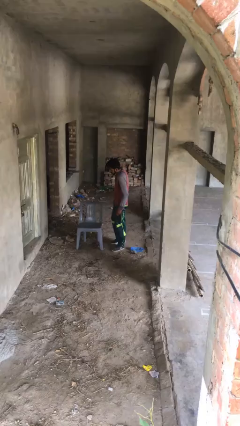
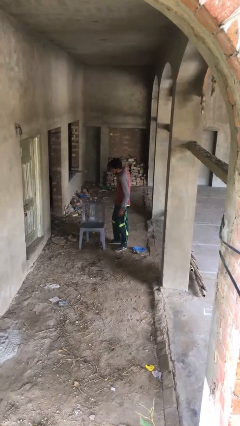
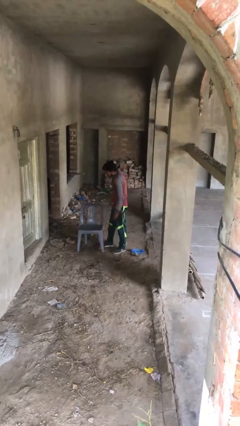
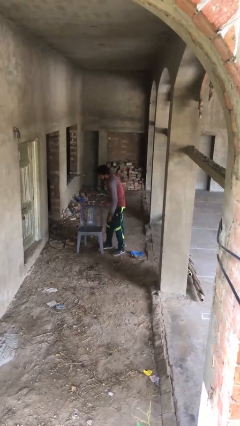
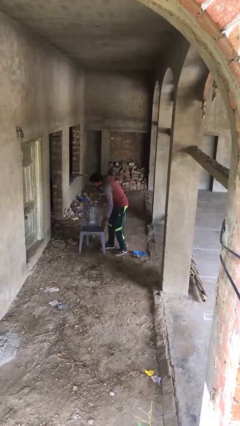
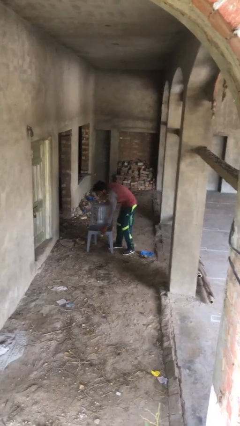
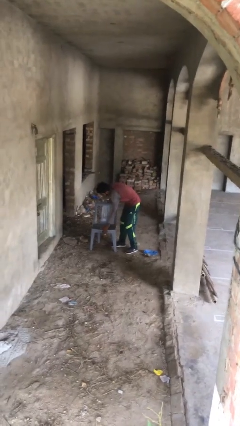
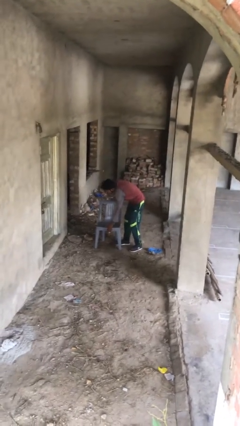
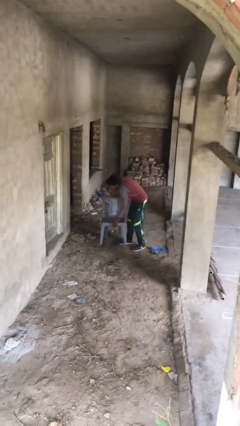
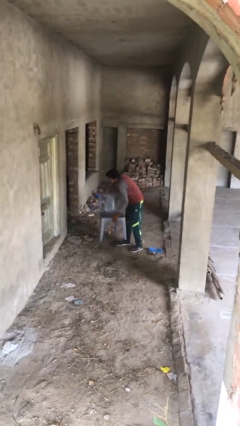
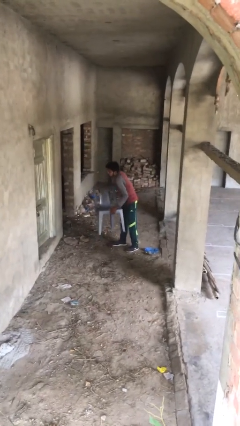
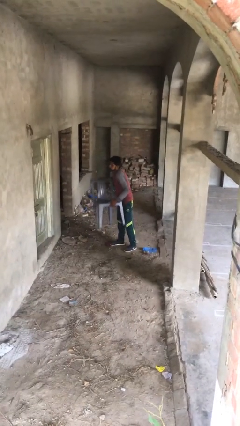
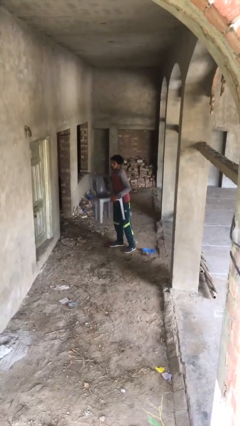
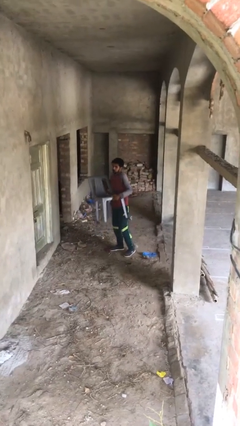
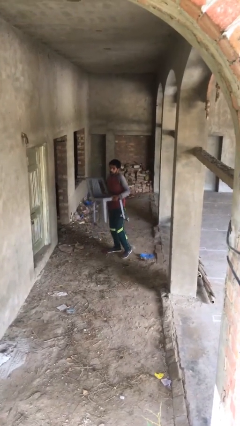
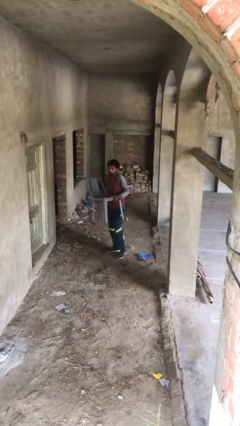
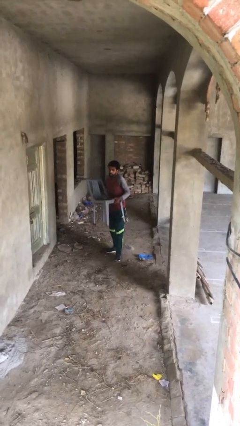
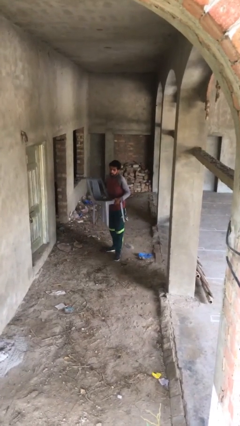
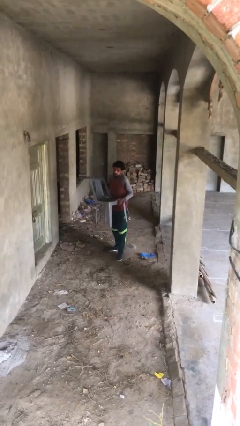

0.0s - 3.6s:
person picks up object from floor

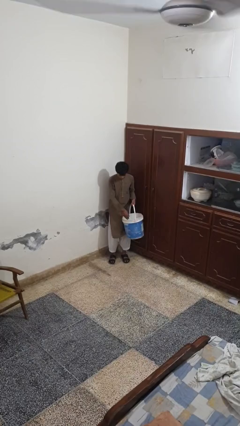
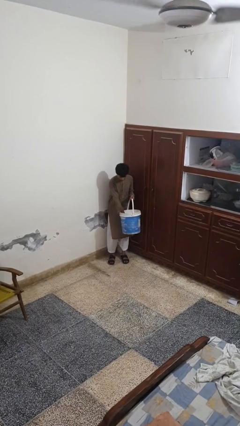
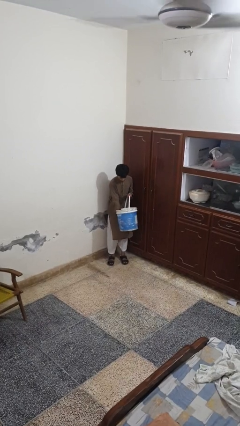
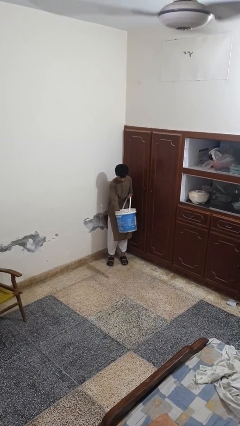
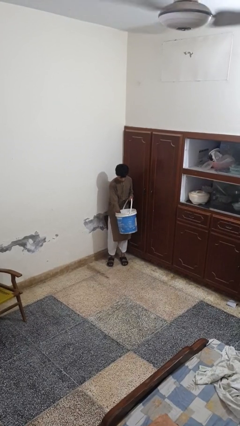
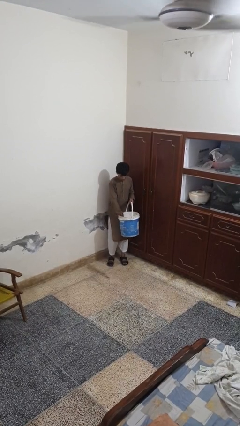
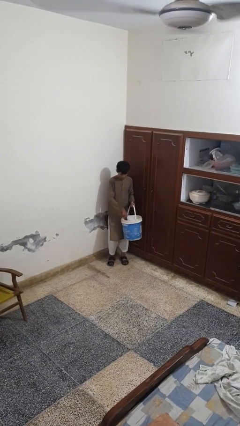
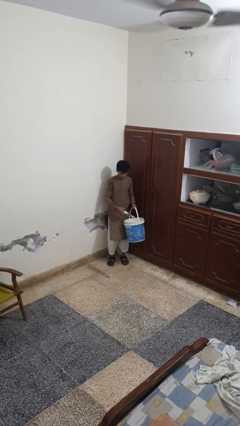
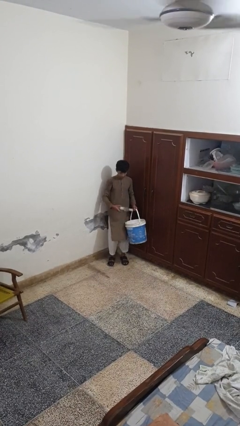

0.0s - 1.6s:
person takes object from basket

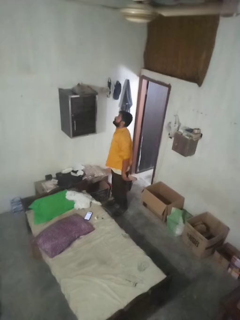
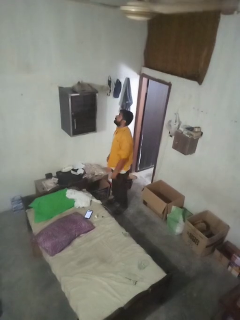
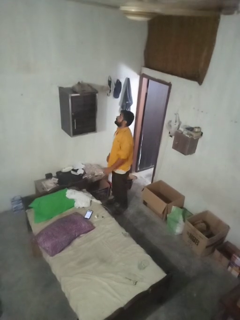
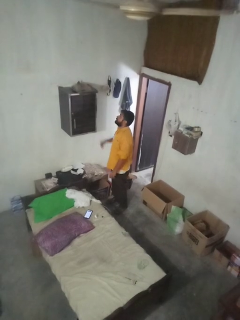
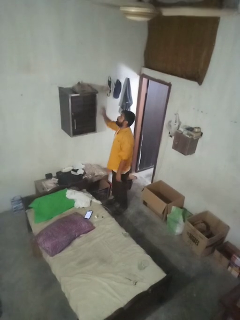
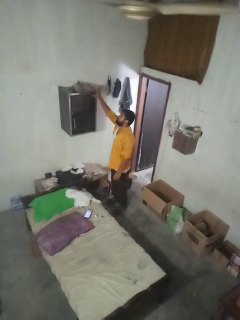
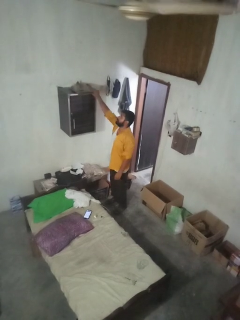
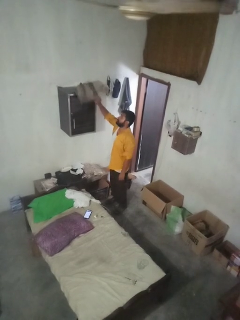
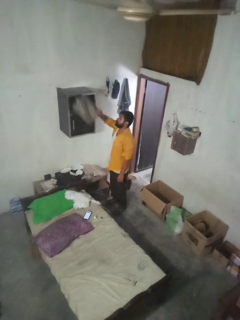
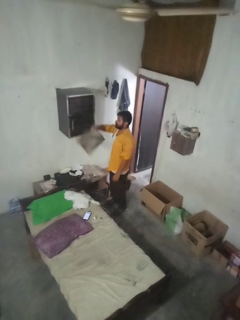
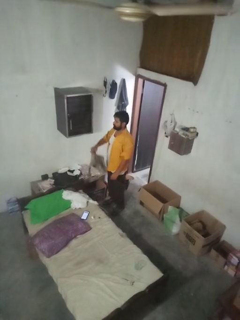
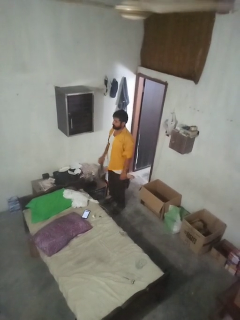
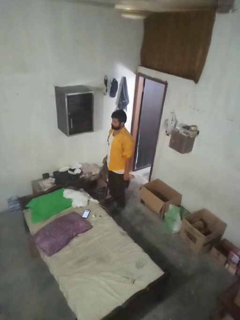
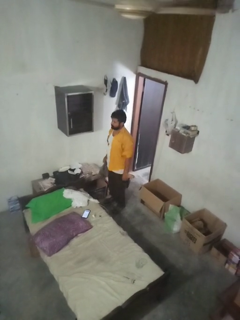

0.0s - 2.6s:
person picks up object from shelf

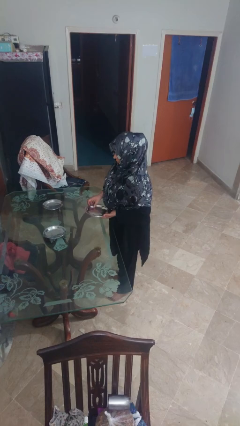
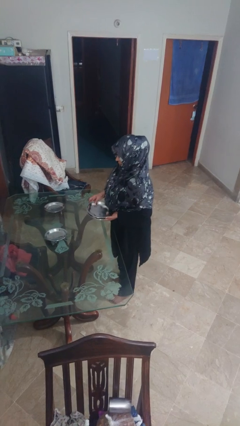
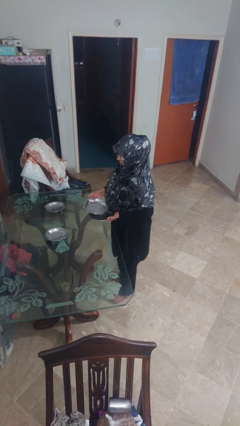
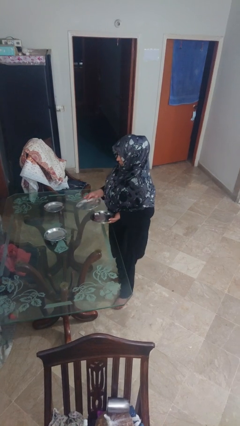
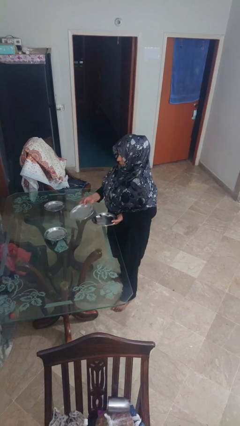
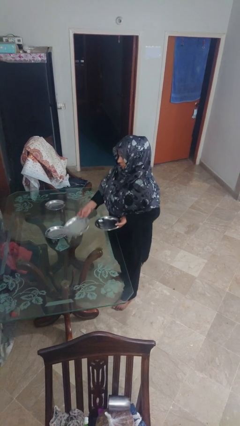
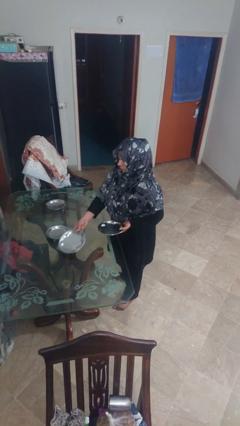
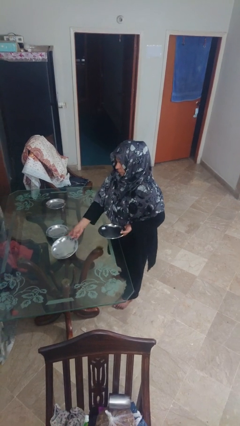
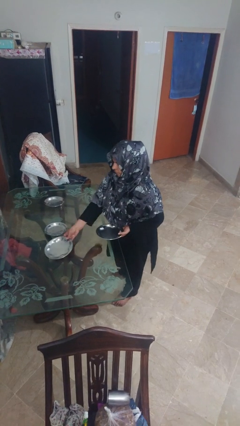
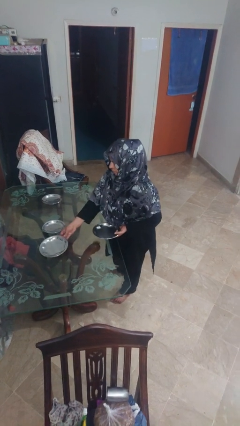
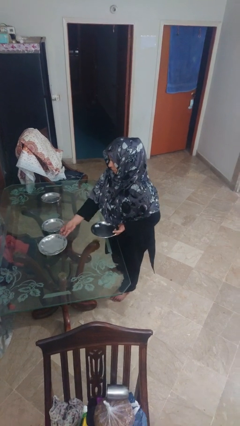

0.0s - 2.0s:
person sets table

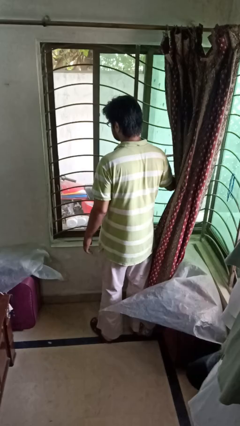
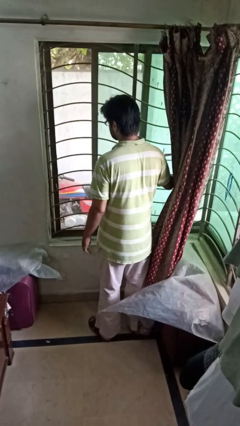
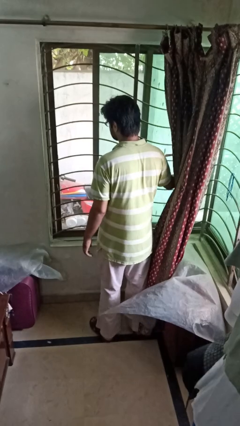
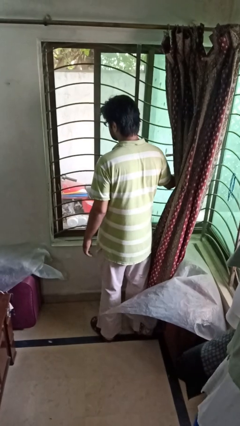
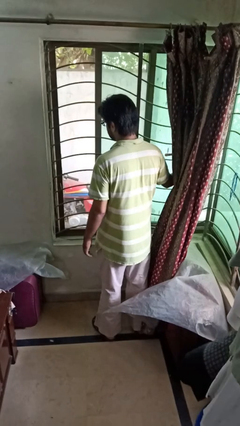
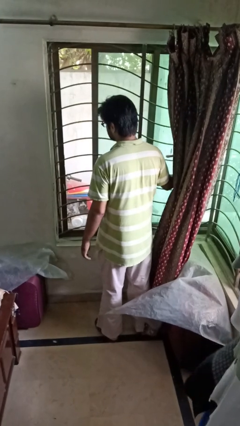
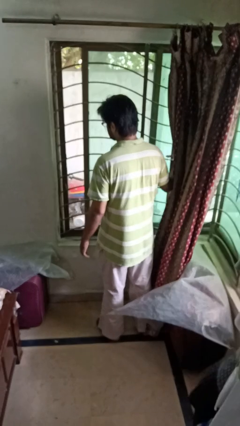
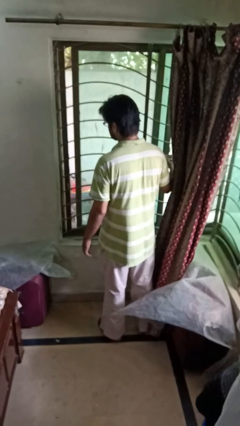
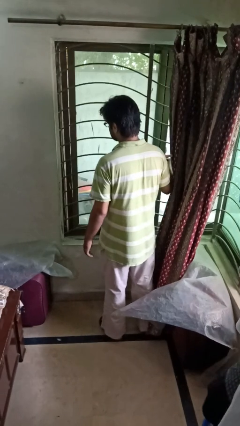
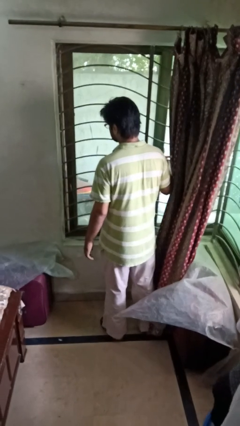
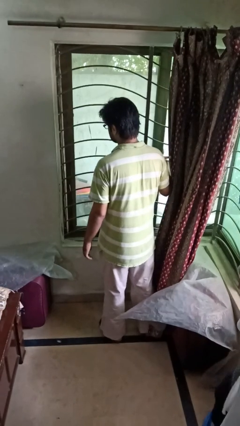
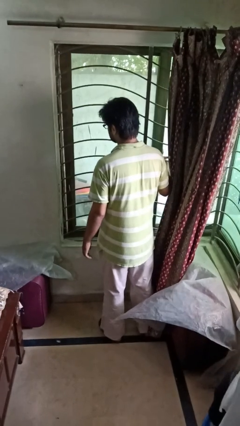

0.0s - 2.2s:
person closes home window

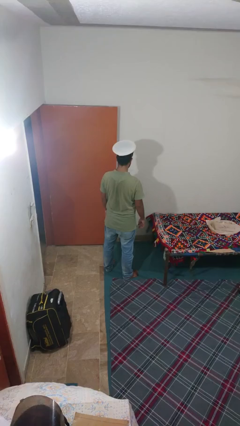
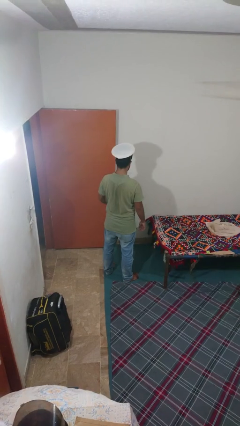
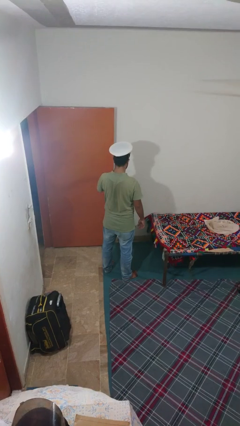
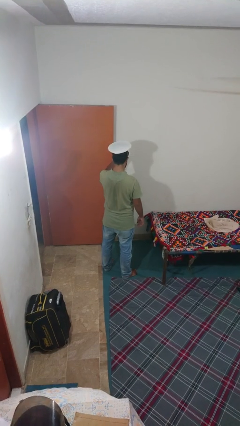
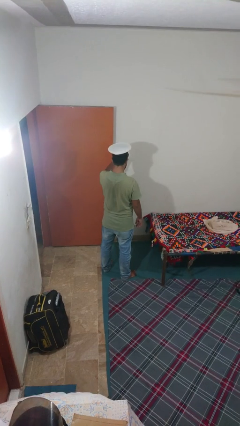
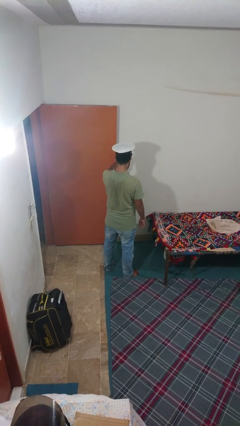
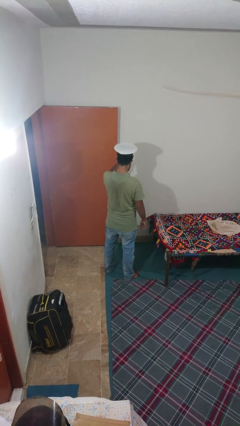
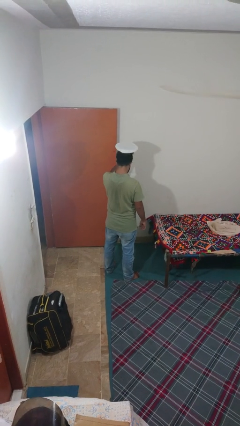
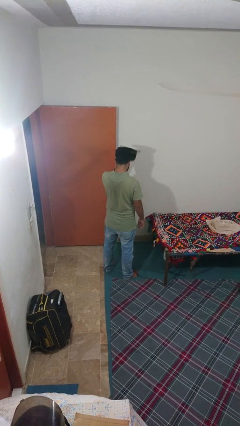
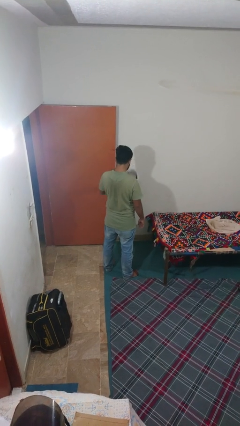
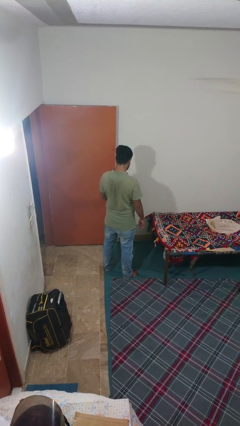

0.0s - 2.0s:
person takes off hat

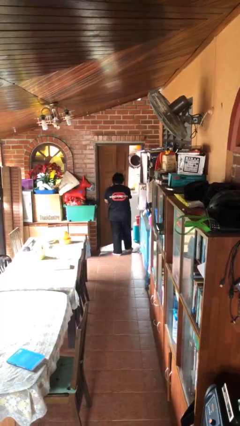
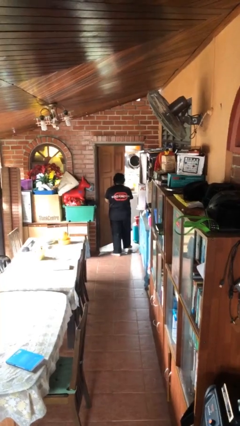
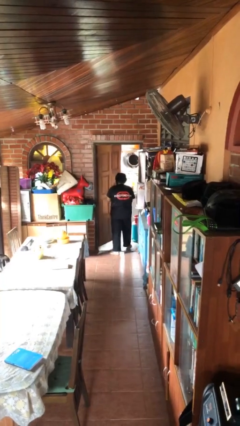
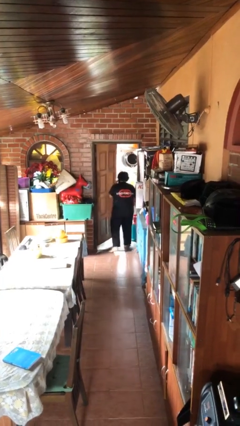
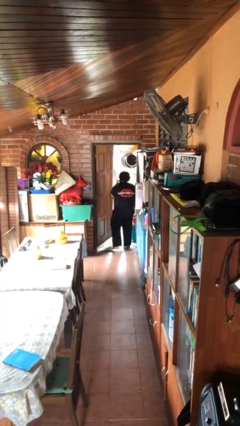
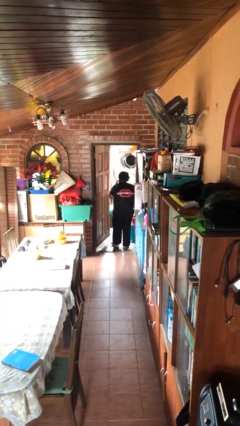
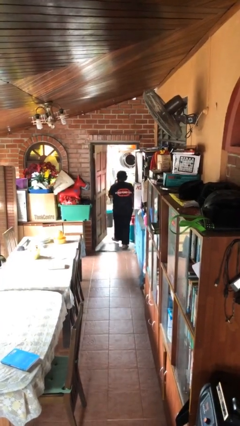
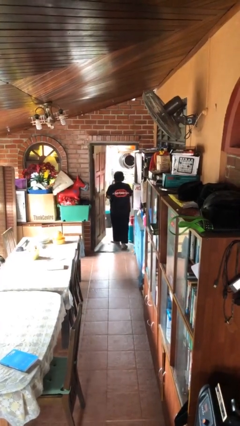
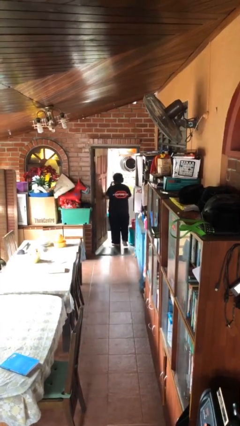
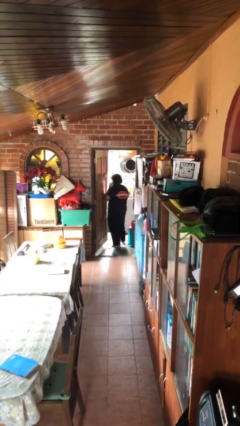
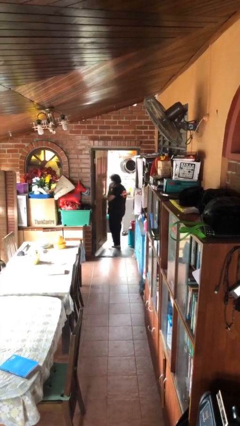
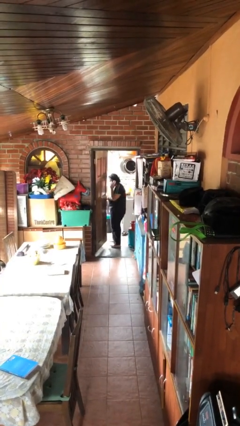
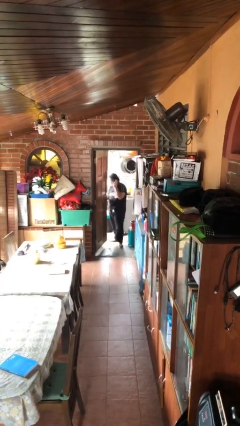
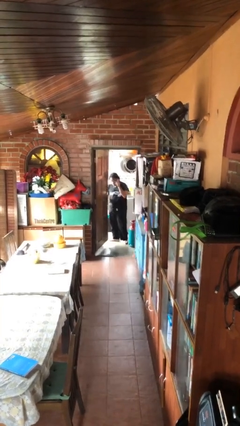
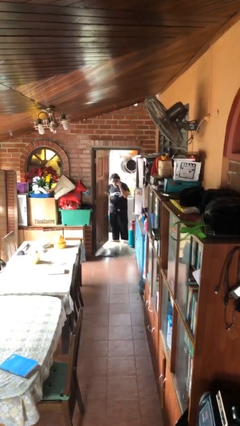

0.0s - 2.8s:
person exits scene through structure

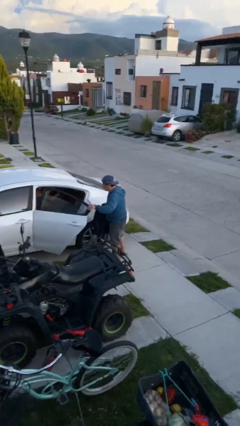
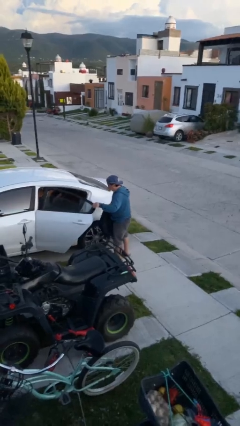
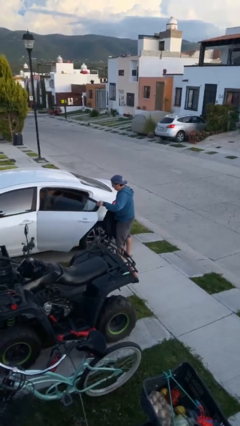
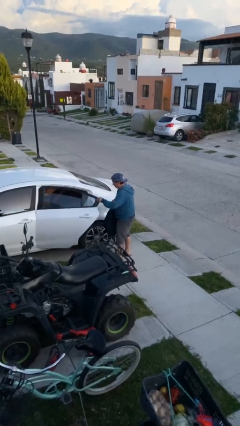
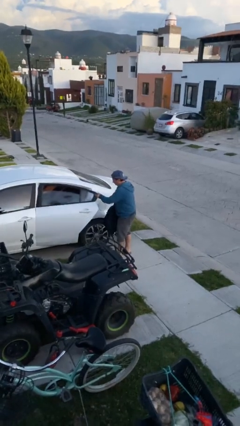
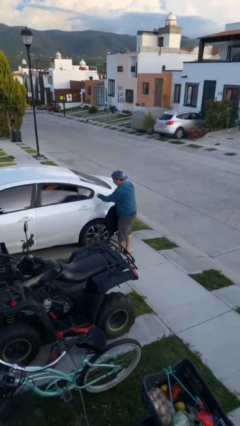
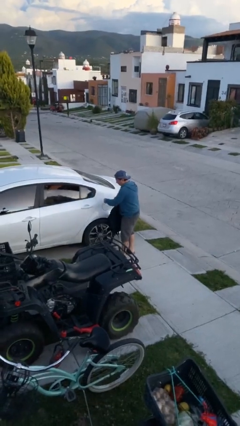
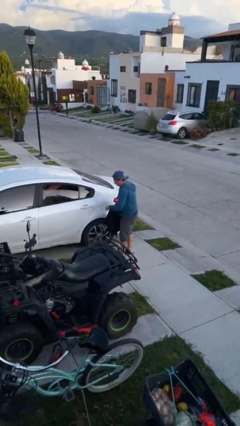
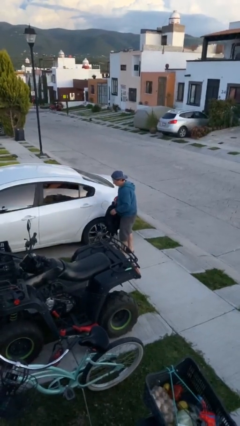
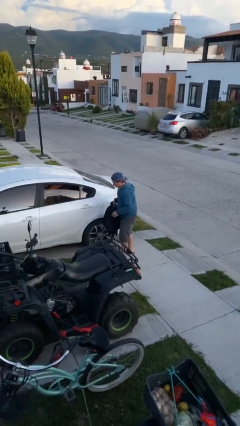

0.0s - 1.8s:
person closes car door
